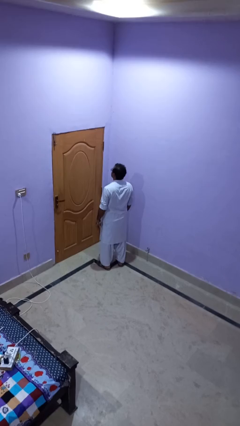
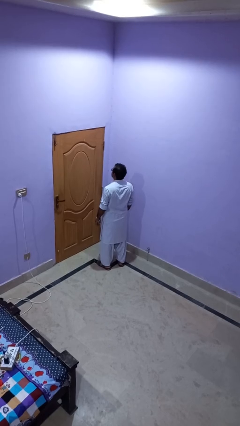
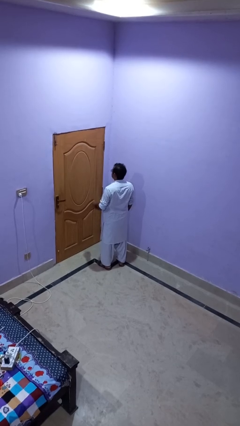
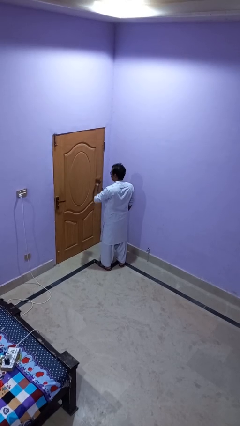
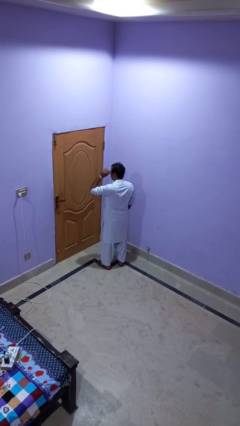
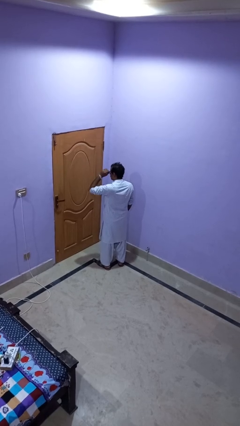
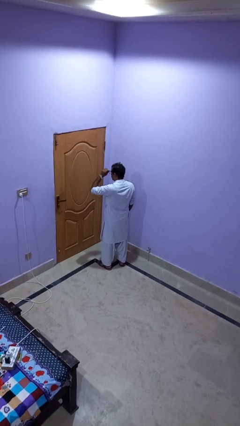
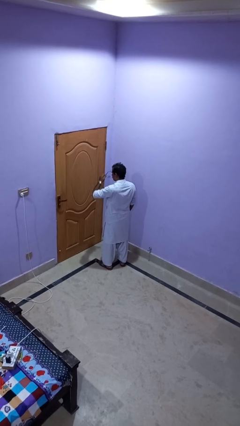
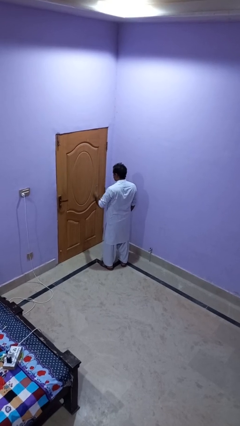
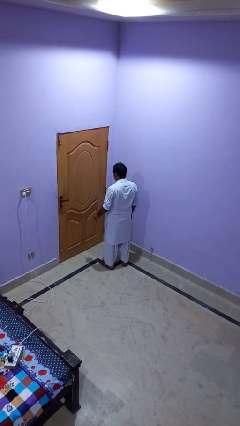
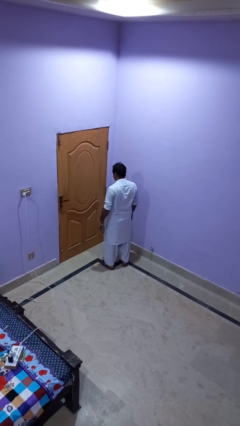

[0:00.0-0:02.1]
person takes off glasses

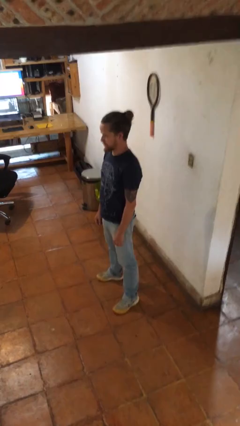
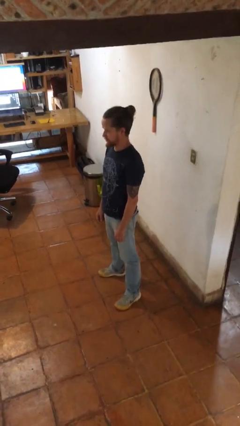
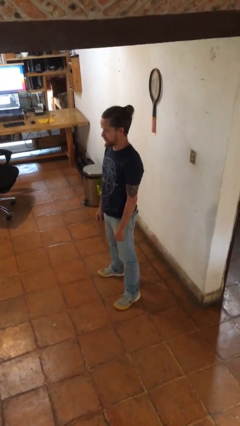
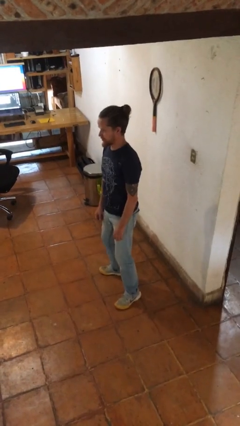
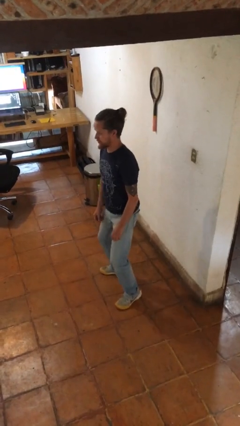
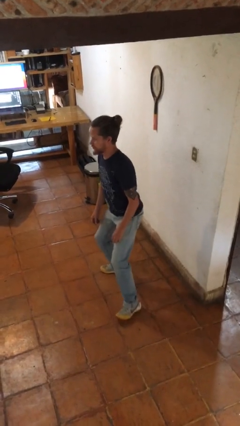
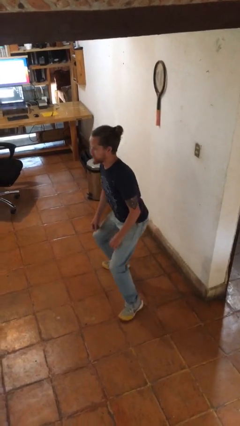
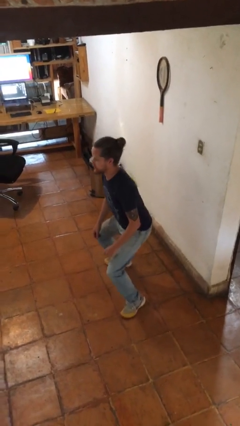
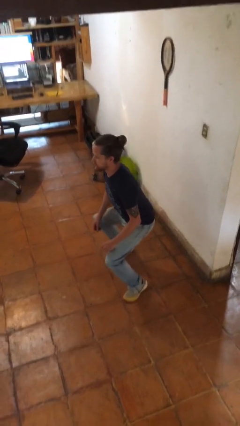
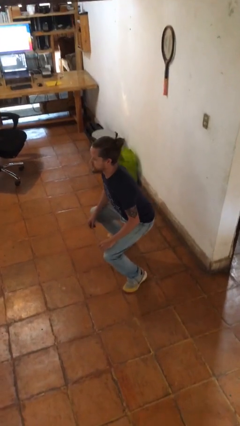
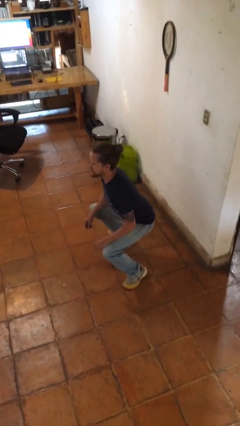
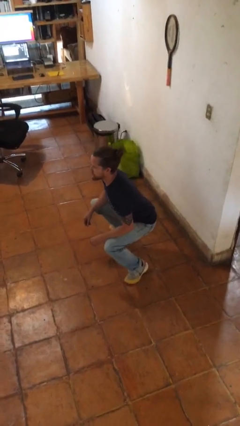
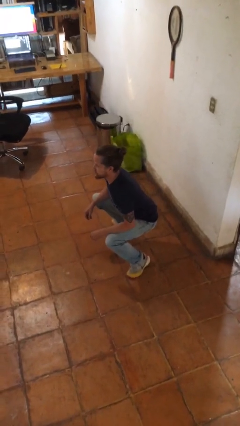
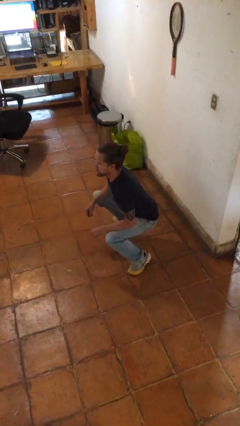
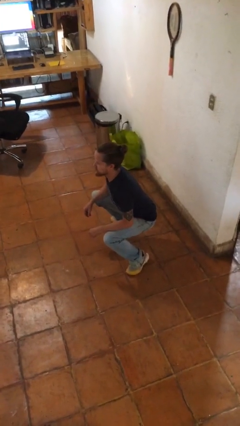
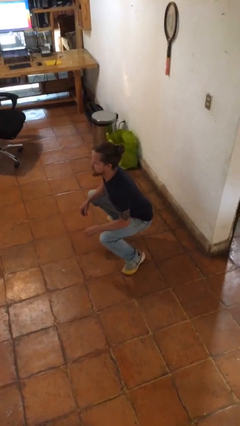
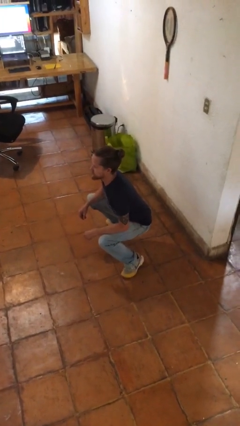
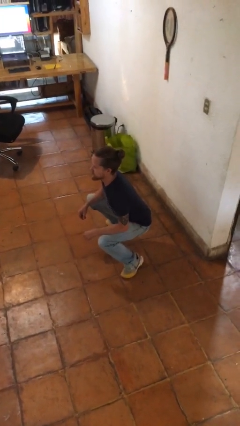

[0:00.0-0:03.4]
person squats

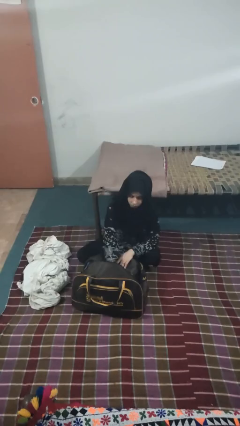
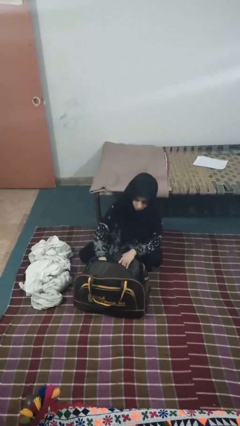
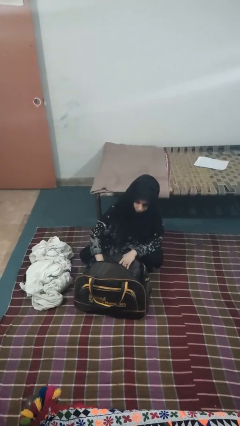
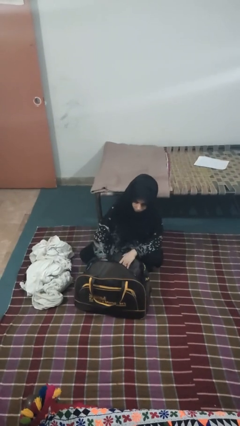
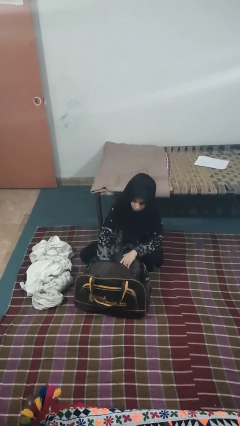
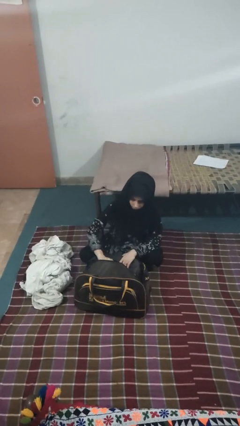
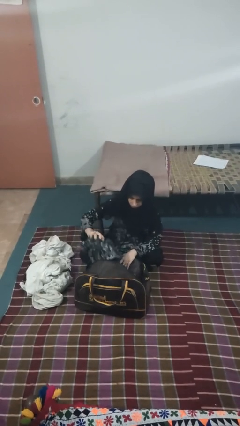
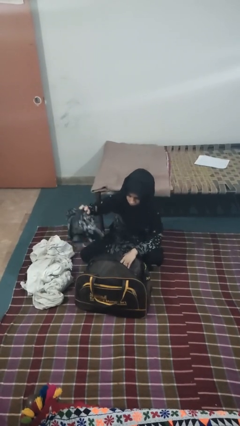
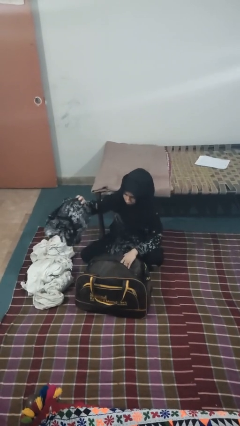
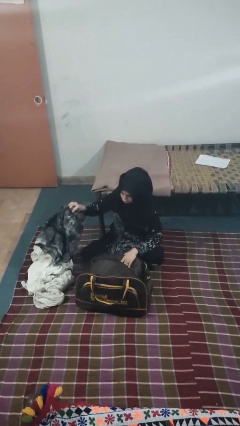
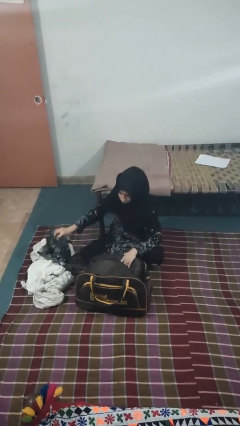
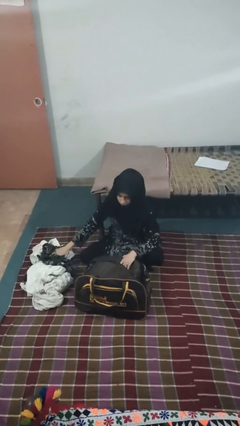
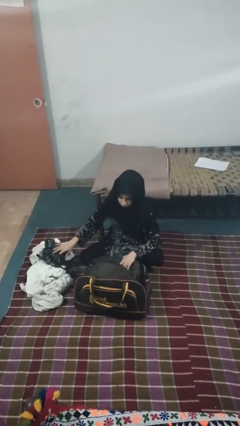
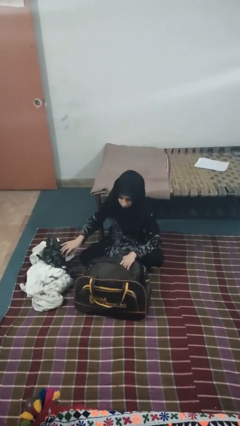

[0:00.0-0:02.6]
person unloads clothes from suitcase

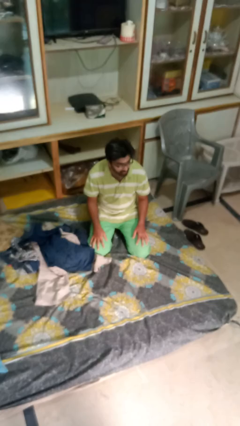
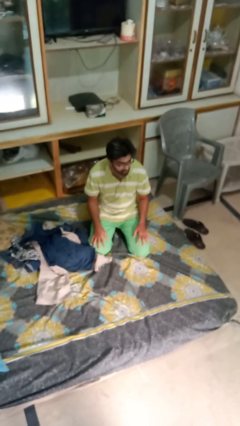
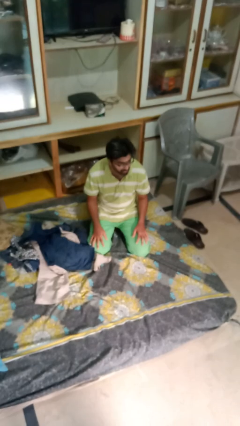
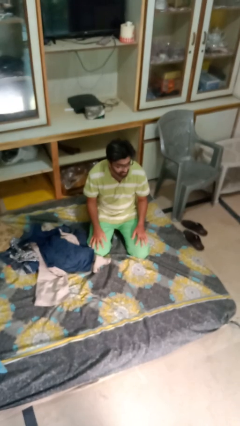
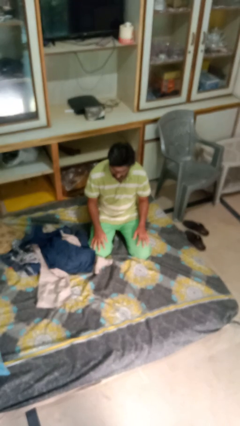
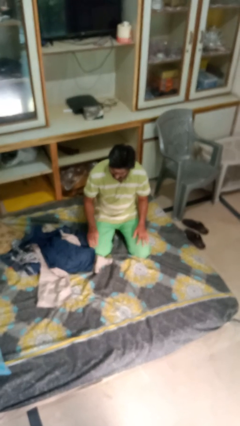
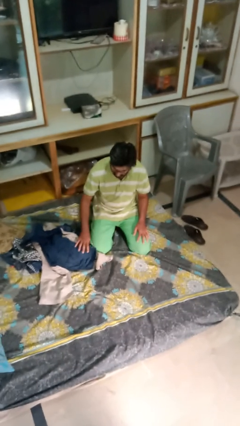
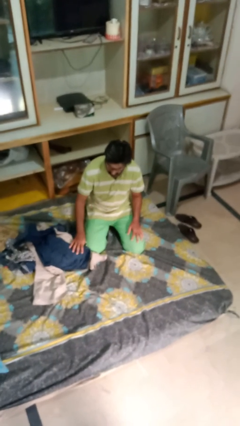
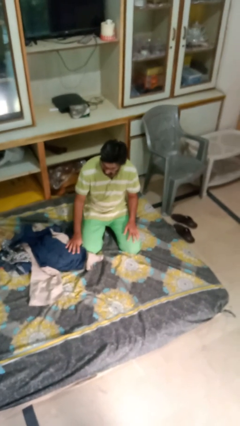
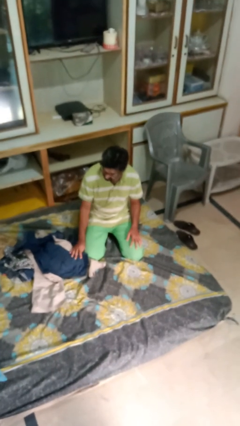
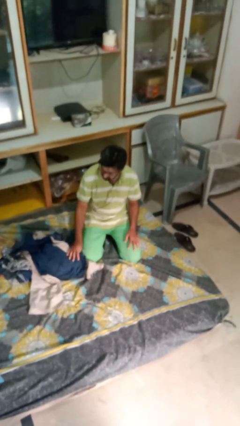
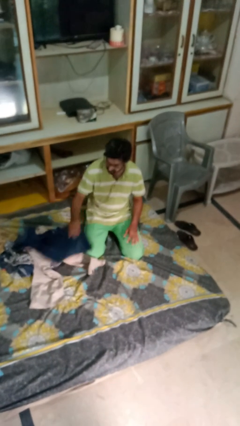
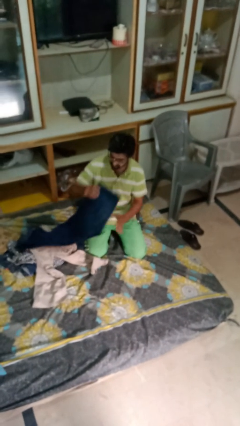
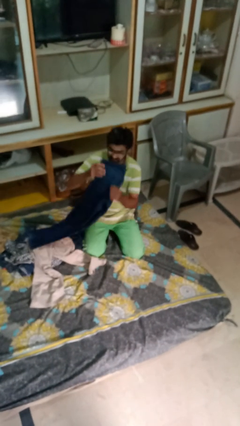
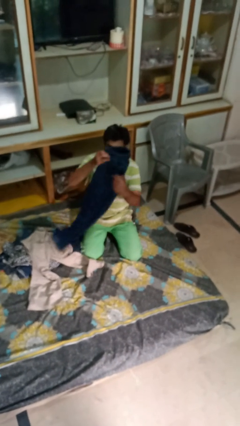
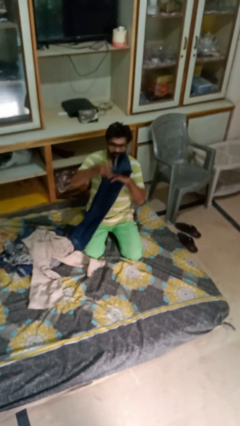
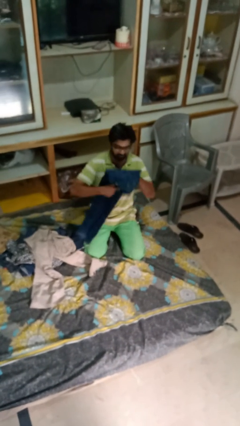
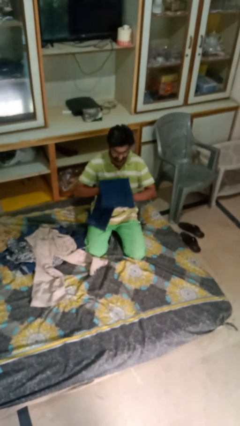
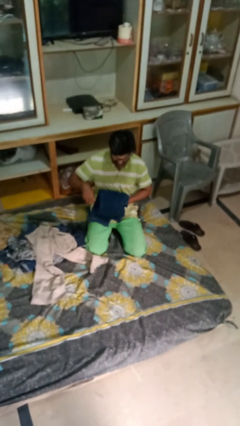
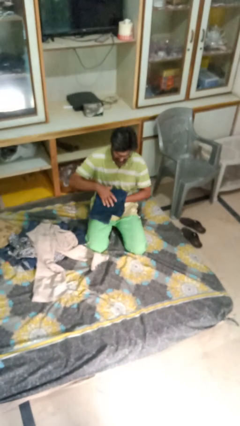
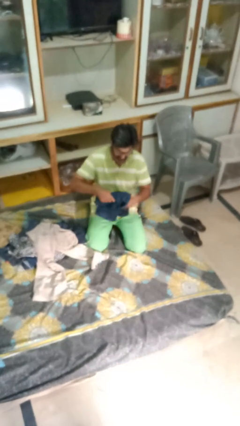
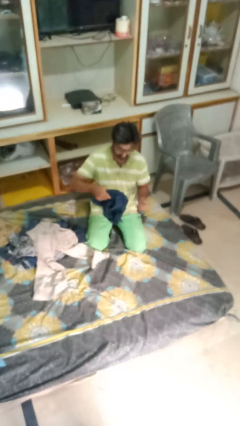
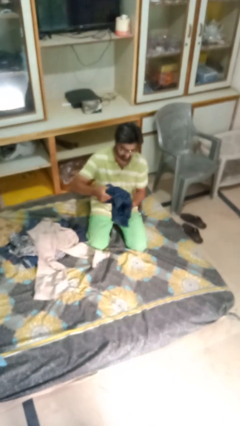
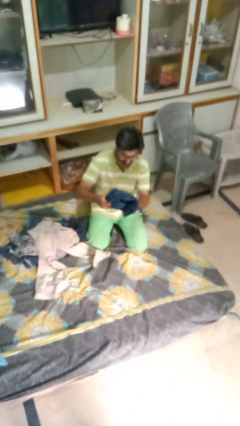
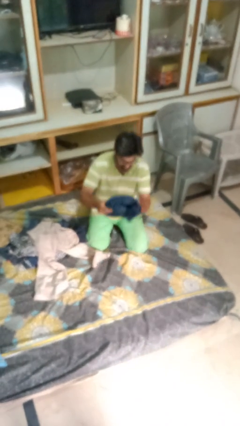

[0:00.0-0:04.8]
person folds pants

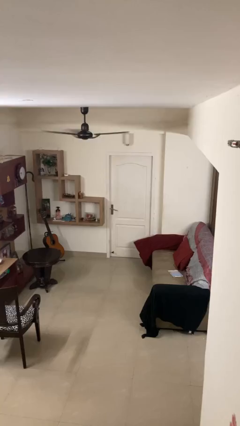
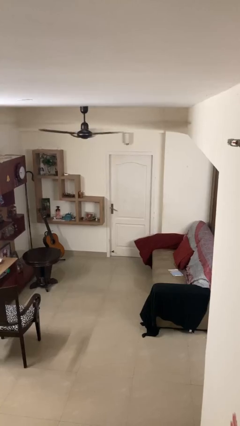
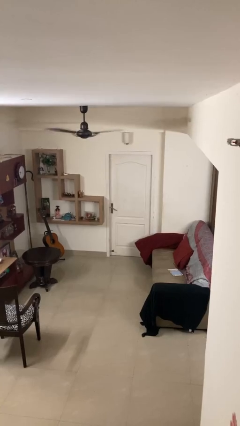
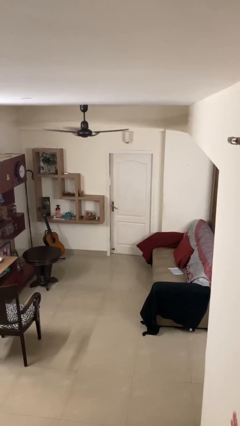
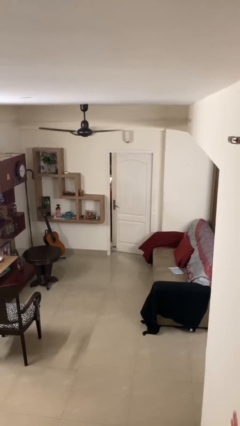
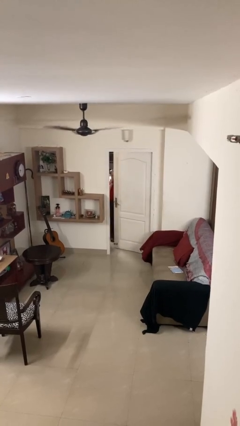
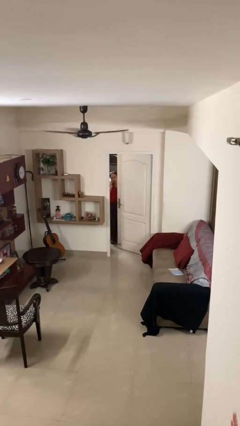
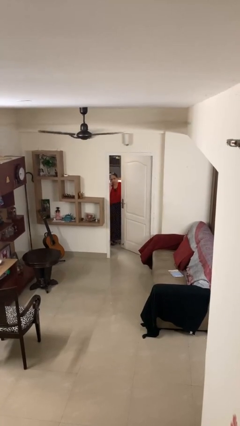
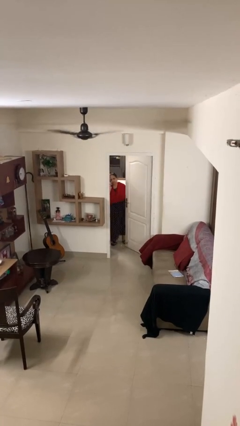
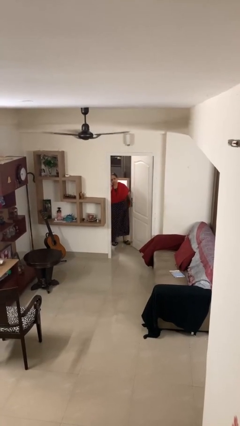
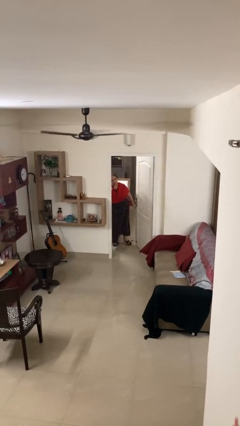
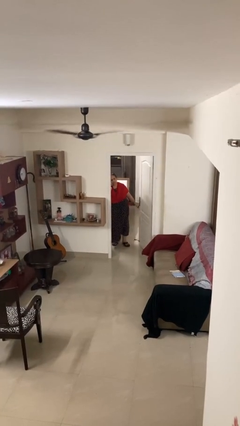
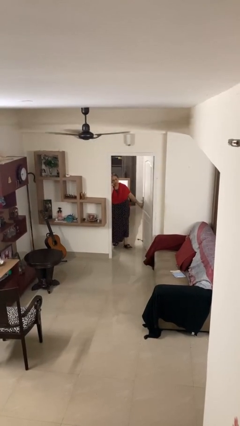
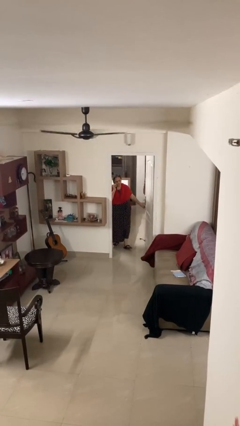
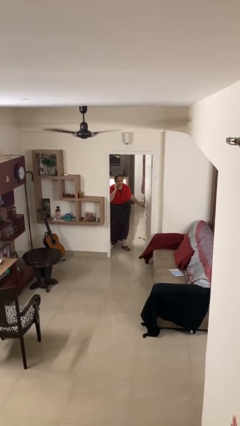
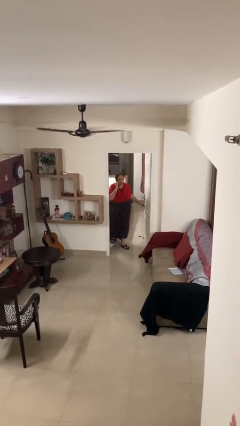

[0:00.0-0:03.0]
person opens facility door

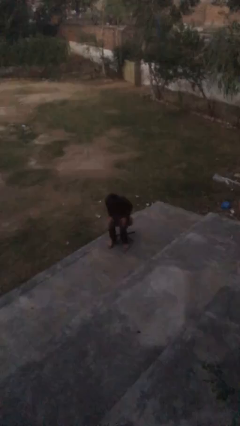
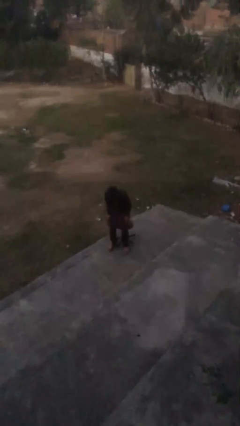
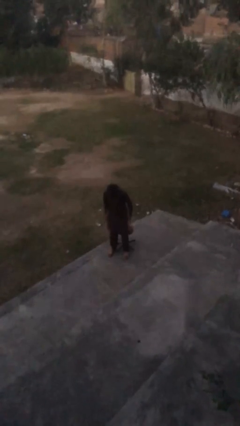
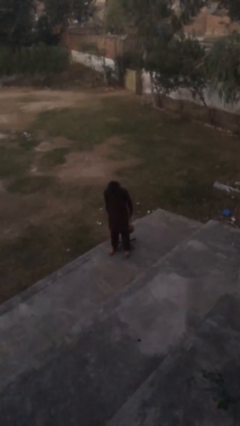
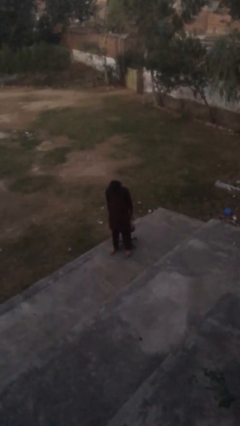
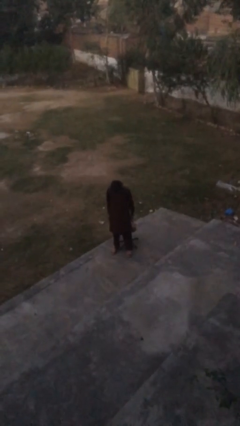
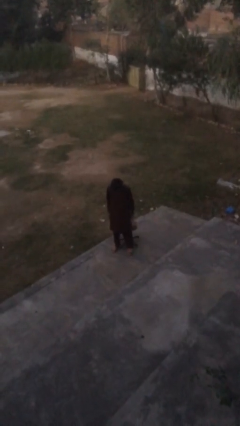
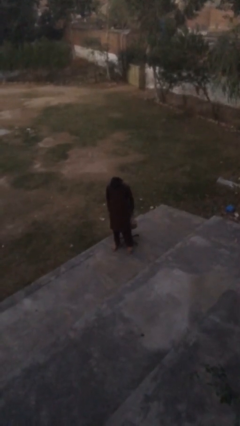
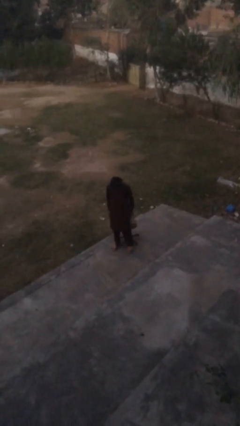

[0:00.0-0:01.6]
person stands up

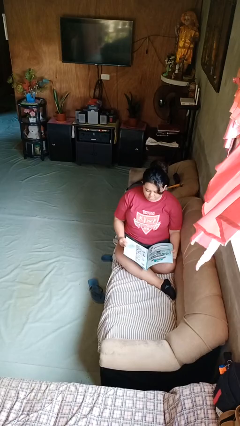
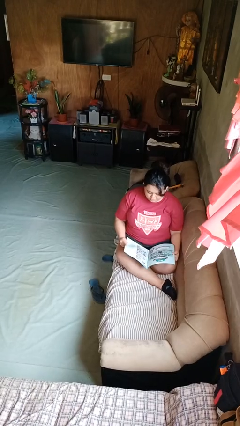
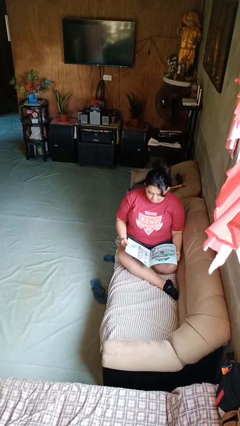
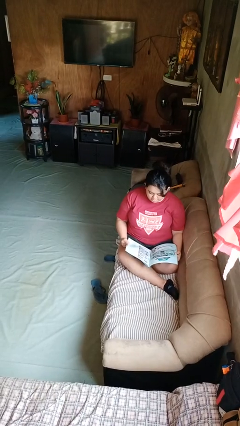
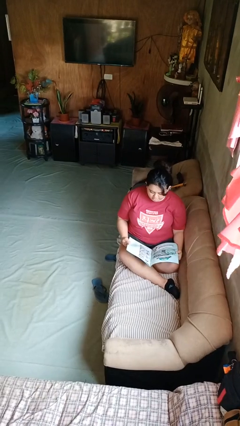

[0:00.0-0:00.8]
person reads magazine
